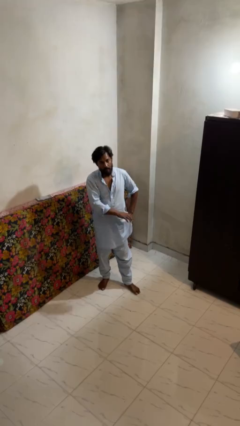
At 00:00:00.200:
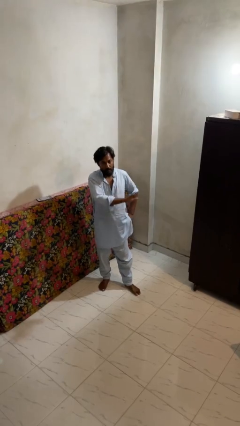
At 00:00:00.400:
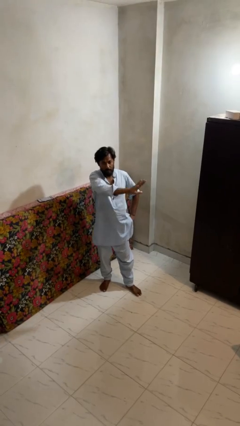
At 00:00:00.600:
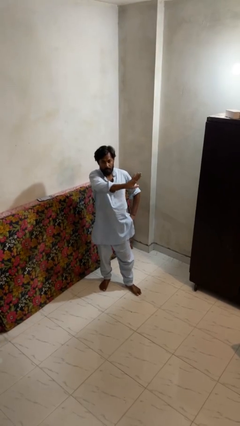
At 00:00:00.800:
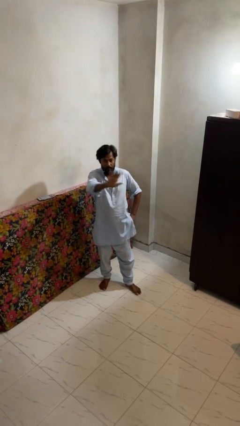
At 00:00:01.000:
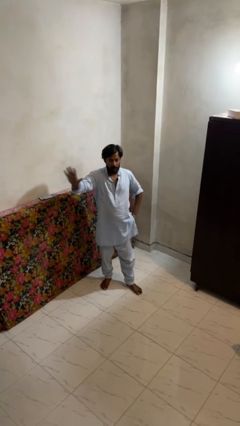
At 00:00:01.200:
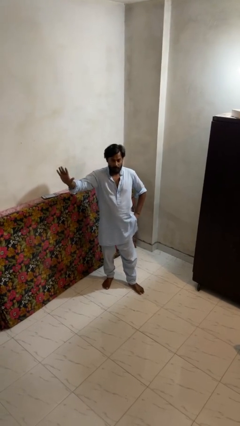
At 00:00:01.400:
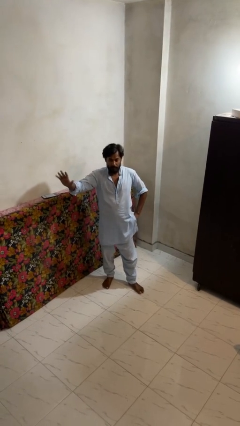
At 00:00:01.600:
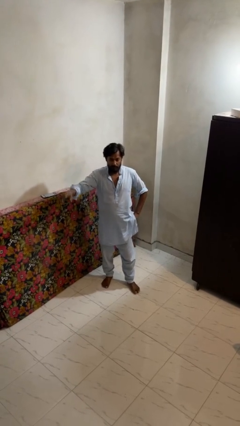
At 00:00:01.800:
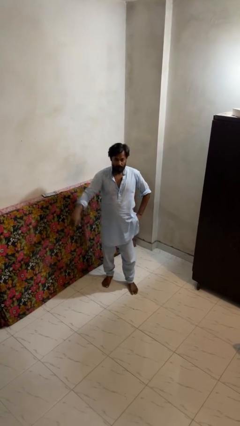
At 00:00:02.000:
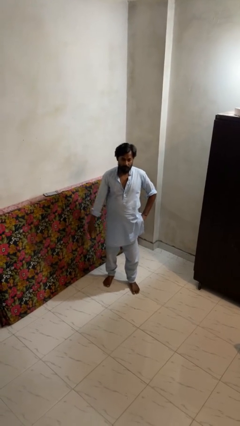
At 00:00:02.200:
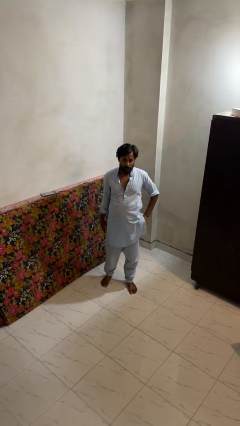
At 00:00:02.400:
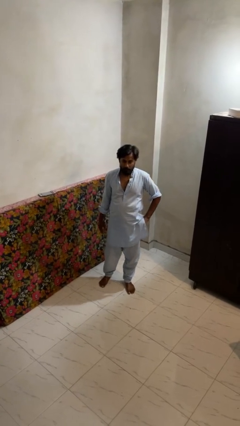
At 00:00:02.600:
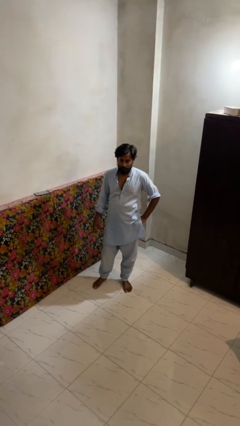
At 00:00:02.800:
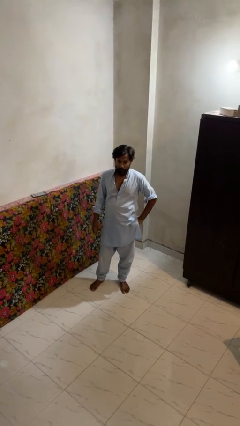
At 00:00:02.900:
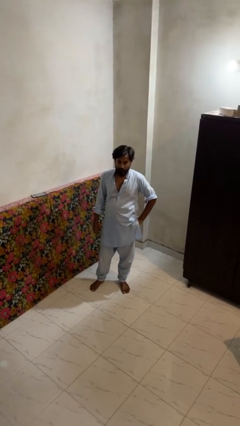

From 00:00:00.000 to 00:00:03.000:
person gestures swipe right

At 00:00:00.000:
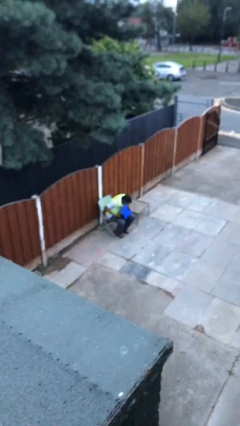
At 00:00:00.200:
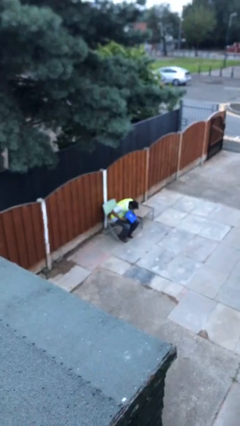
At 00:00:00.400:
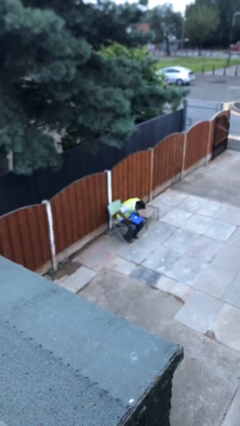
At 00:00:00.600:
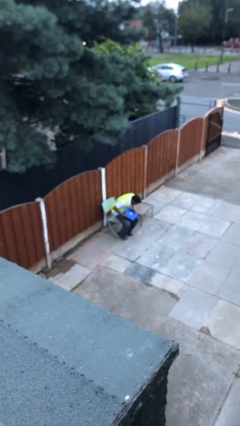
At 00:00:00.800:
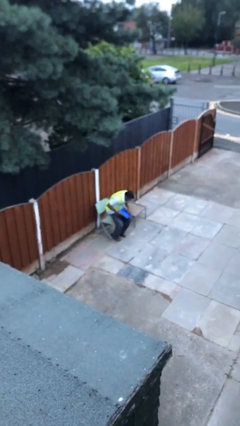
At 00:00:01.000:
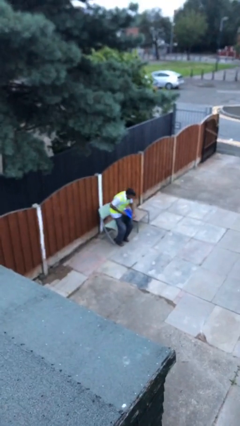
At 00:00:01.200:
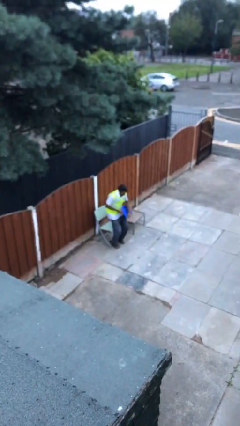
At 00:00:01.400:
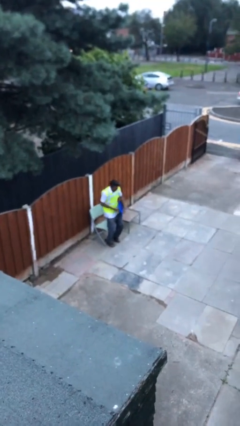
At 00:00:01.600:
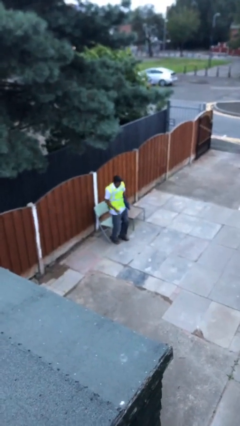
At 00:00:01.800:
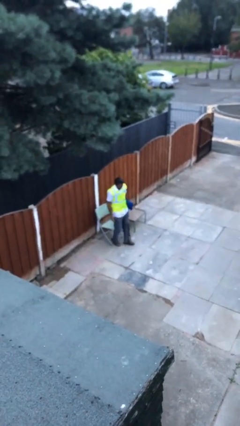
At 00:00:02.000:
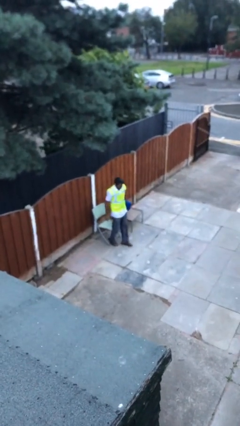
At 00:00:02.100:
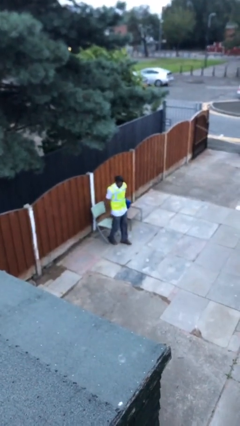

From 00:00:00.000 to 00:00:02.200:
person stands up

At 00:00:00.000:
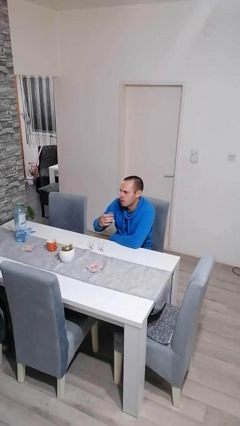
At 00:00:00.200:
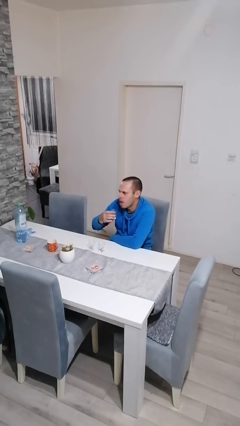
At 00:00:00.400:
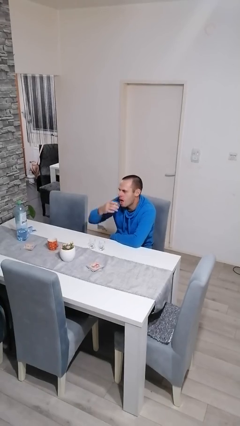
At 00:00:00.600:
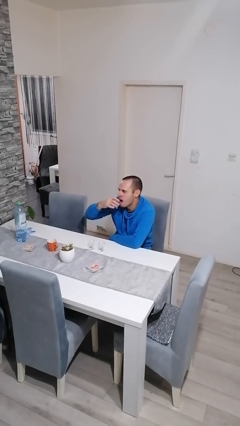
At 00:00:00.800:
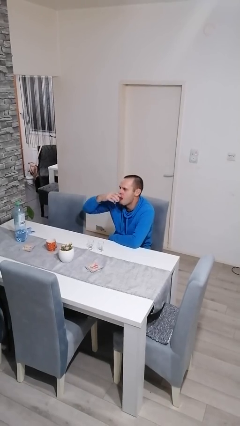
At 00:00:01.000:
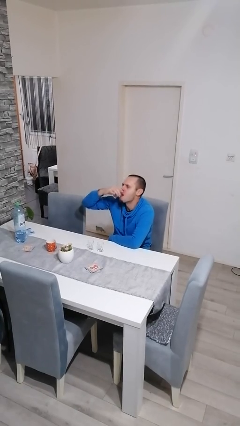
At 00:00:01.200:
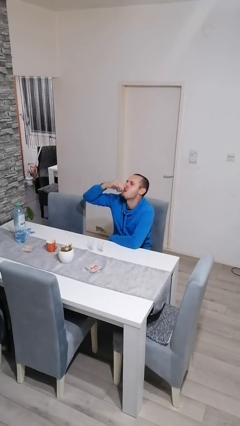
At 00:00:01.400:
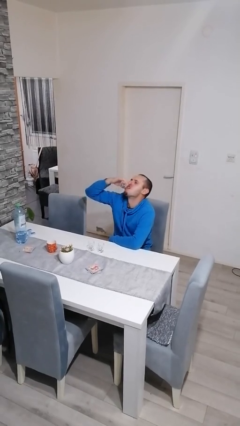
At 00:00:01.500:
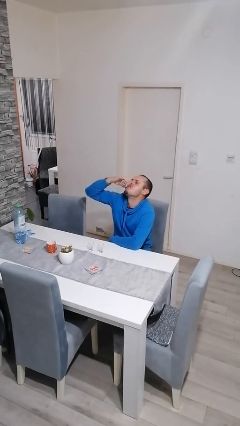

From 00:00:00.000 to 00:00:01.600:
person drinks from shotglass

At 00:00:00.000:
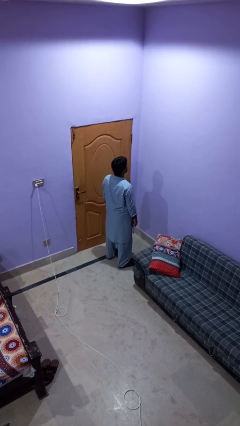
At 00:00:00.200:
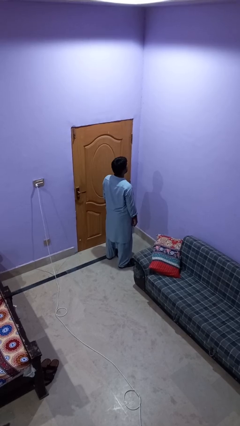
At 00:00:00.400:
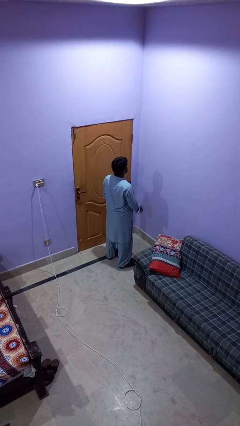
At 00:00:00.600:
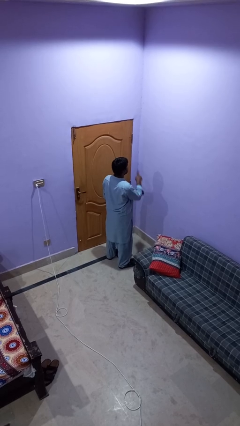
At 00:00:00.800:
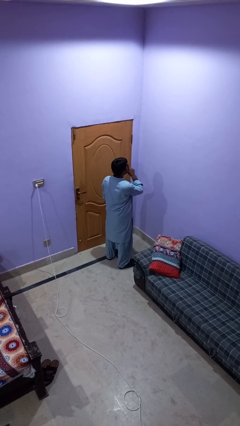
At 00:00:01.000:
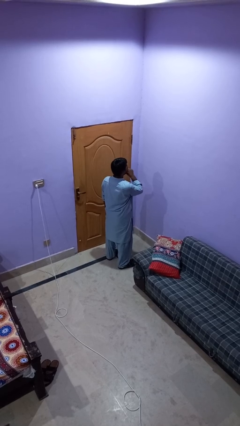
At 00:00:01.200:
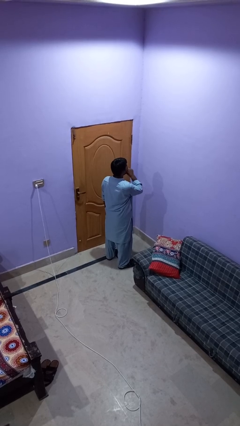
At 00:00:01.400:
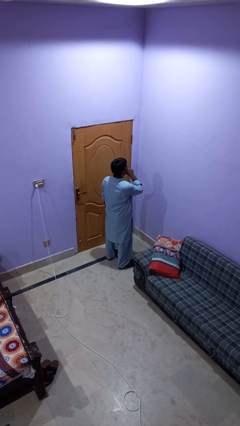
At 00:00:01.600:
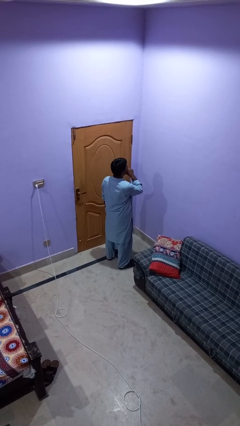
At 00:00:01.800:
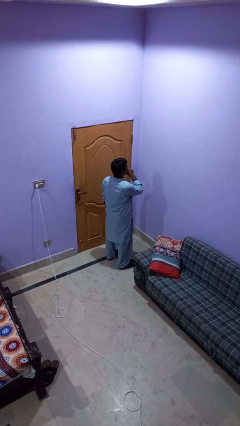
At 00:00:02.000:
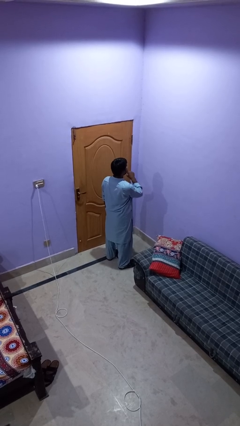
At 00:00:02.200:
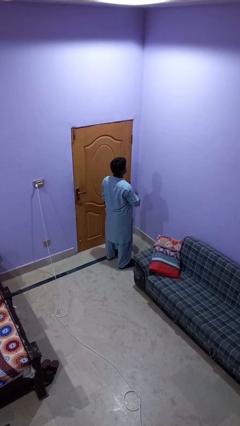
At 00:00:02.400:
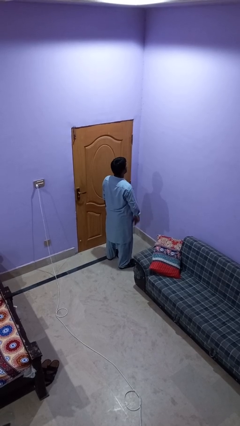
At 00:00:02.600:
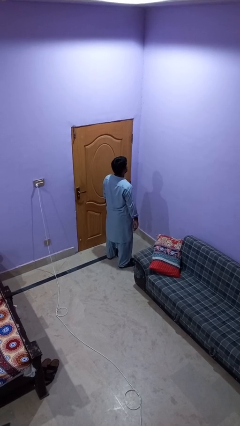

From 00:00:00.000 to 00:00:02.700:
person gestures be quiet

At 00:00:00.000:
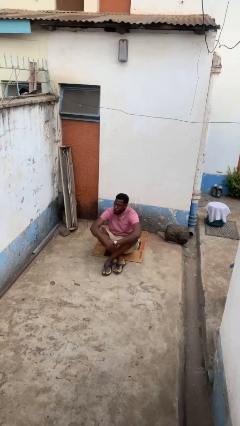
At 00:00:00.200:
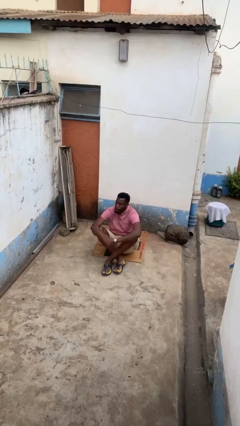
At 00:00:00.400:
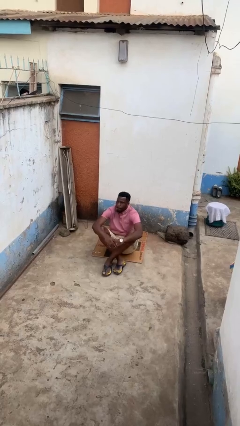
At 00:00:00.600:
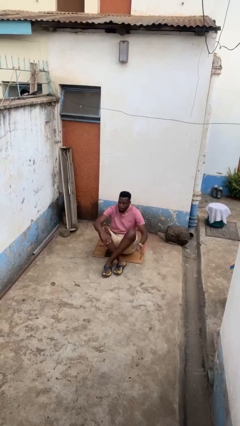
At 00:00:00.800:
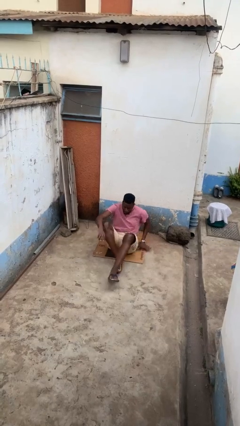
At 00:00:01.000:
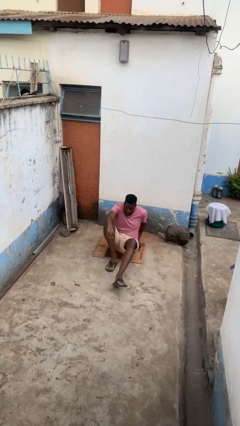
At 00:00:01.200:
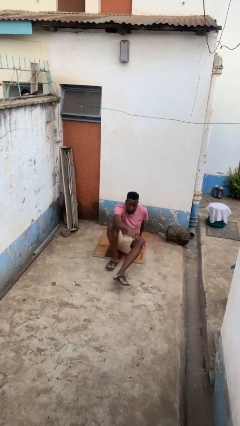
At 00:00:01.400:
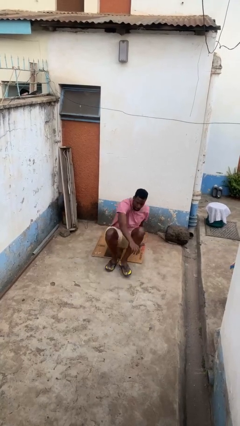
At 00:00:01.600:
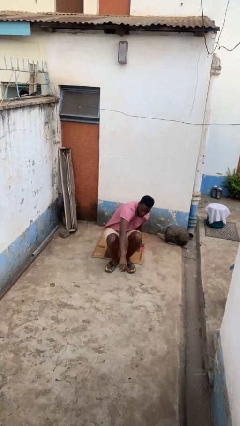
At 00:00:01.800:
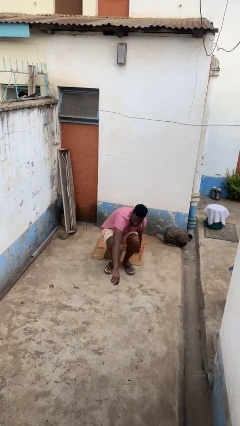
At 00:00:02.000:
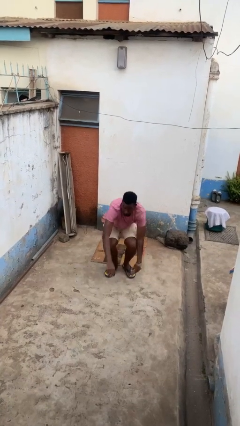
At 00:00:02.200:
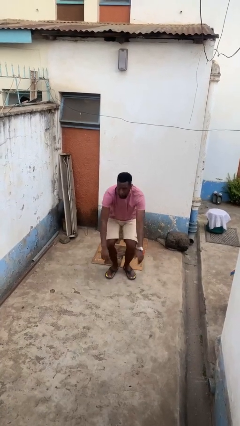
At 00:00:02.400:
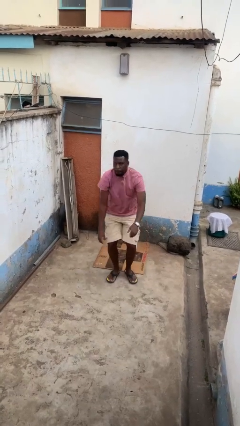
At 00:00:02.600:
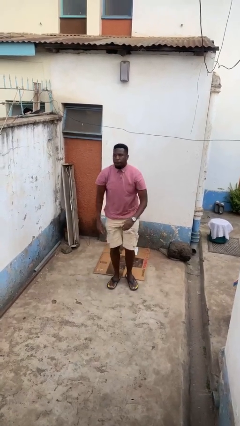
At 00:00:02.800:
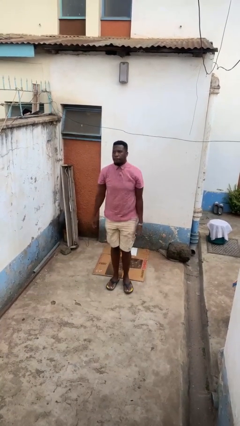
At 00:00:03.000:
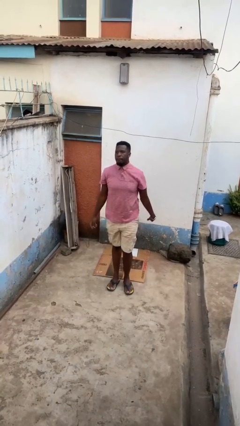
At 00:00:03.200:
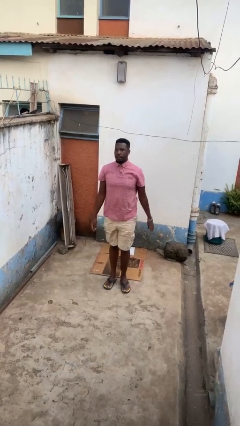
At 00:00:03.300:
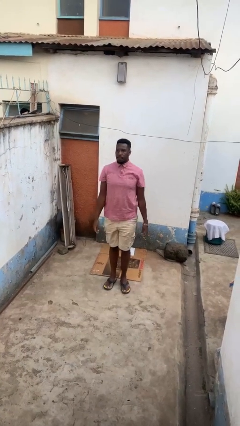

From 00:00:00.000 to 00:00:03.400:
person stands up from floor

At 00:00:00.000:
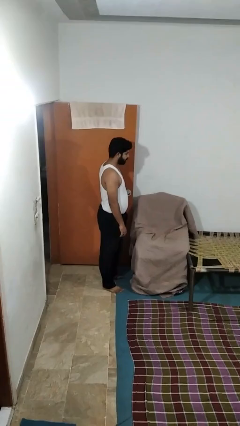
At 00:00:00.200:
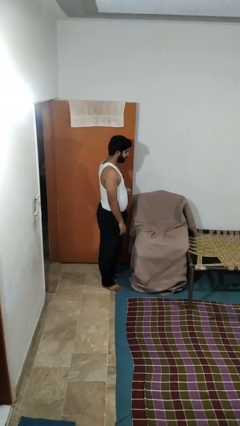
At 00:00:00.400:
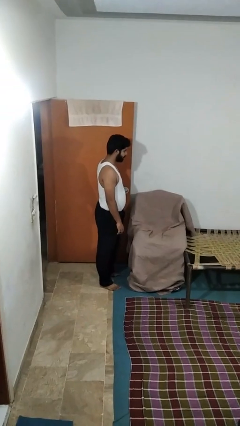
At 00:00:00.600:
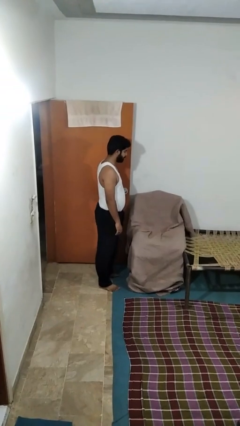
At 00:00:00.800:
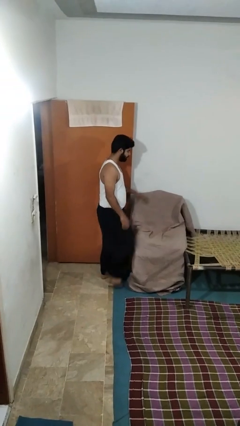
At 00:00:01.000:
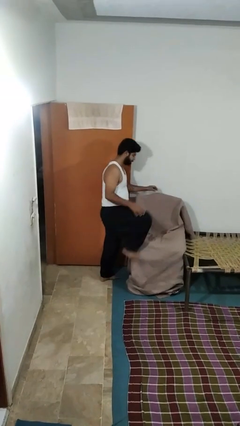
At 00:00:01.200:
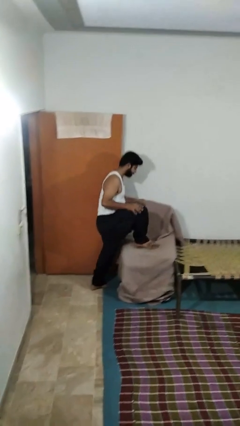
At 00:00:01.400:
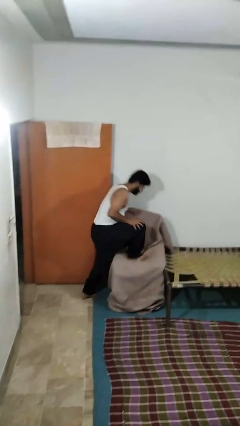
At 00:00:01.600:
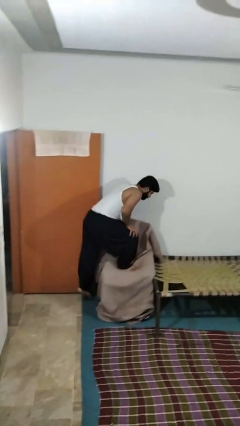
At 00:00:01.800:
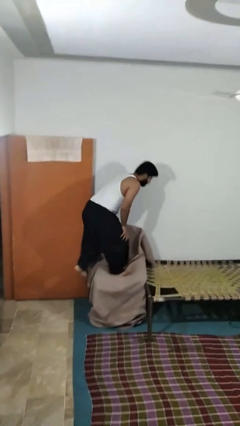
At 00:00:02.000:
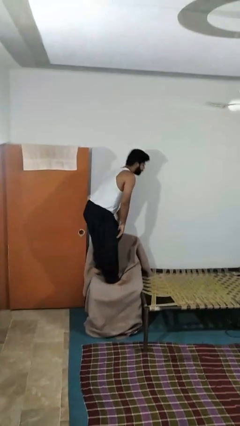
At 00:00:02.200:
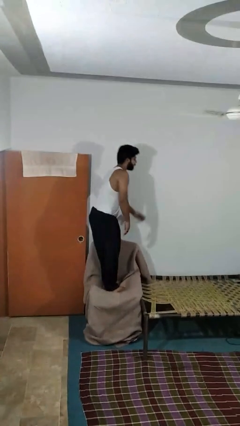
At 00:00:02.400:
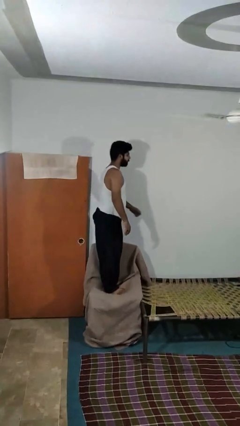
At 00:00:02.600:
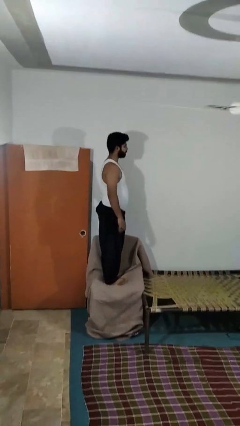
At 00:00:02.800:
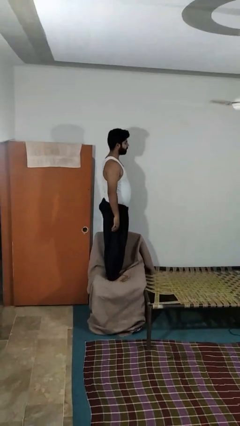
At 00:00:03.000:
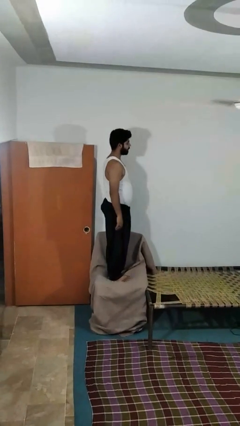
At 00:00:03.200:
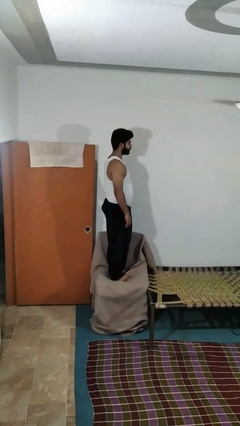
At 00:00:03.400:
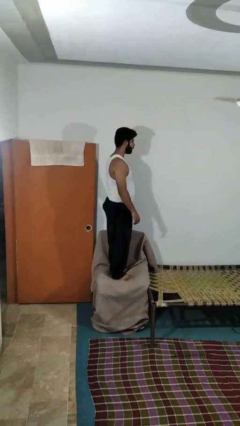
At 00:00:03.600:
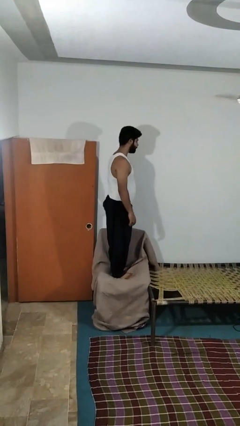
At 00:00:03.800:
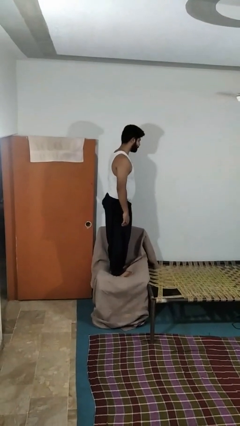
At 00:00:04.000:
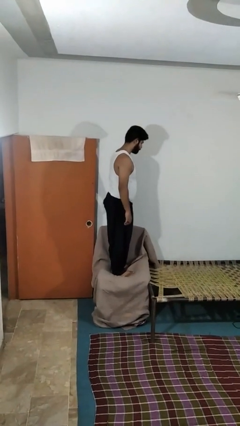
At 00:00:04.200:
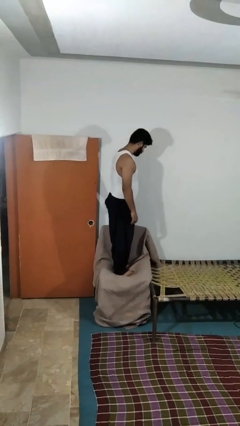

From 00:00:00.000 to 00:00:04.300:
person climbs on couch
